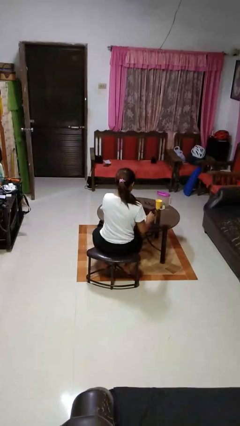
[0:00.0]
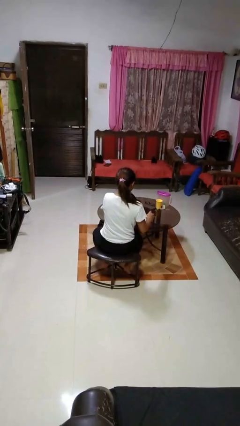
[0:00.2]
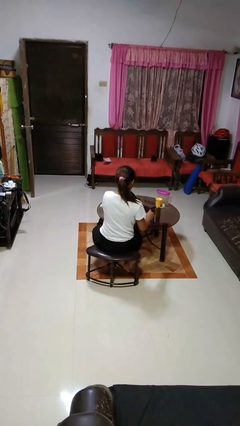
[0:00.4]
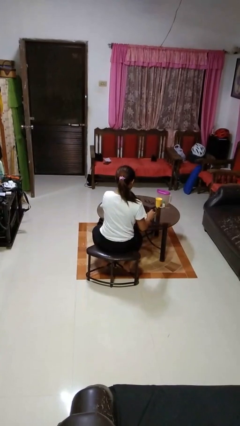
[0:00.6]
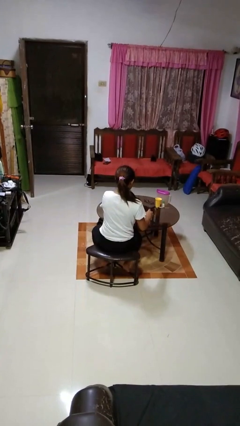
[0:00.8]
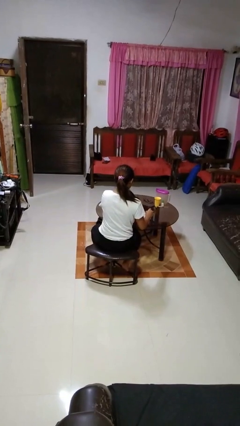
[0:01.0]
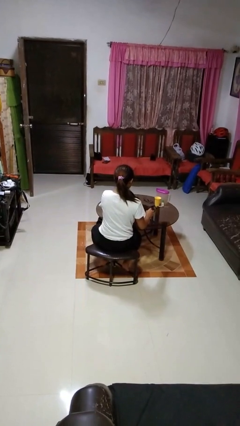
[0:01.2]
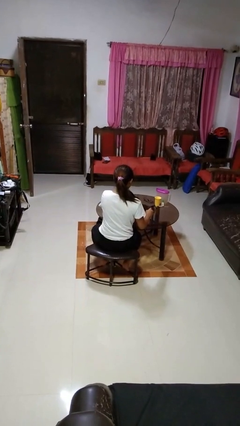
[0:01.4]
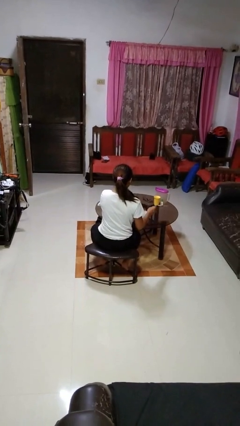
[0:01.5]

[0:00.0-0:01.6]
person stirs mug

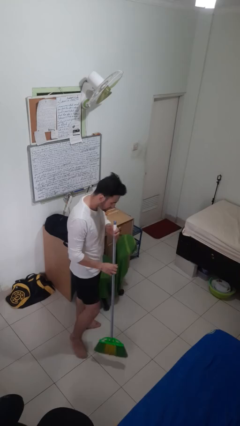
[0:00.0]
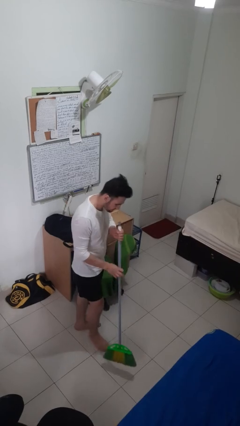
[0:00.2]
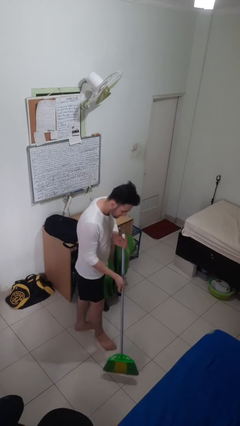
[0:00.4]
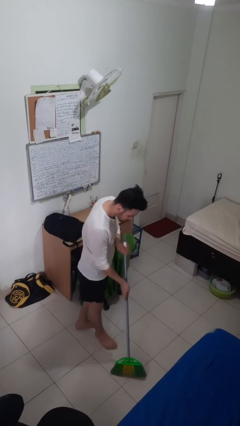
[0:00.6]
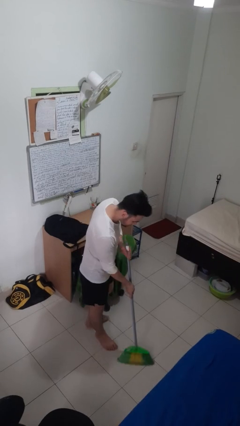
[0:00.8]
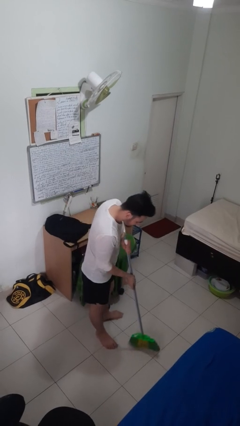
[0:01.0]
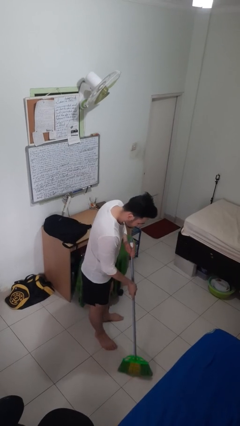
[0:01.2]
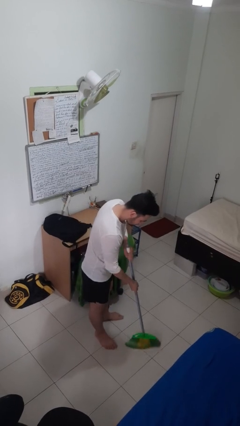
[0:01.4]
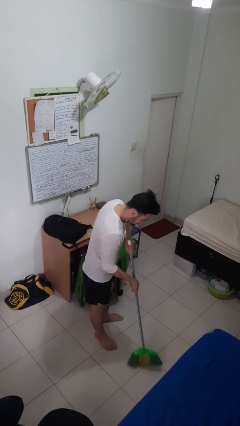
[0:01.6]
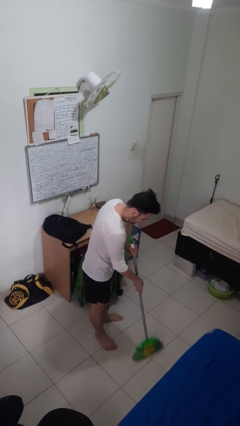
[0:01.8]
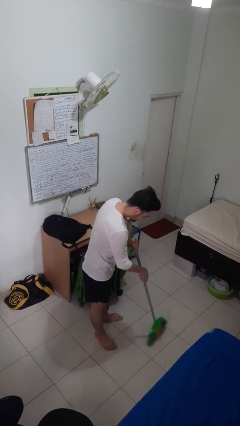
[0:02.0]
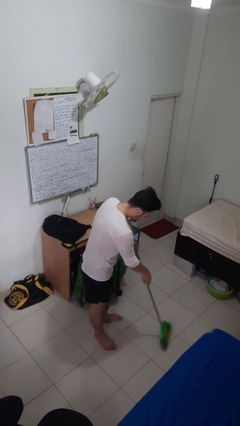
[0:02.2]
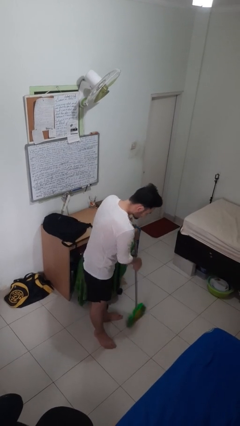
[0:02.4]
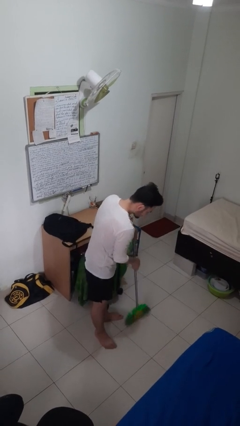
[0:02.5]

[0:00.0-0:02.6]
person sweeps floor

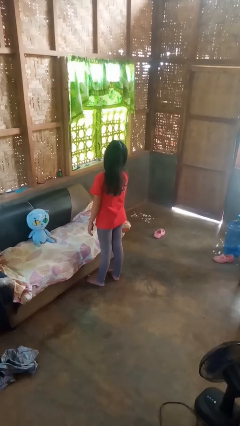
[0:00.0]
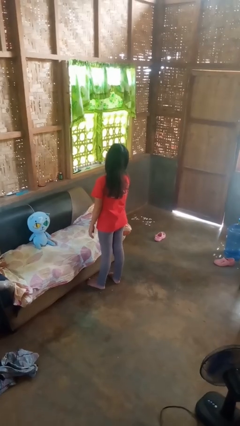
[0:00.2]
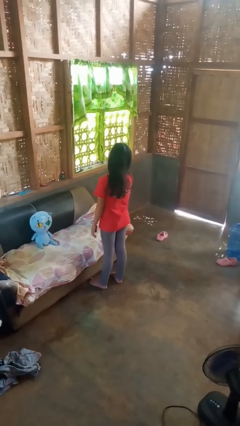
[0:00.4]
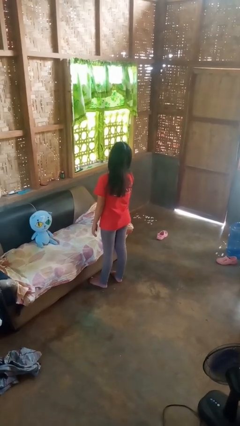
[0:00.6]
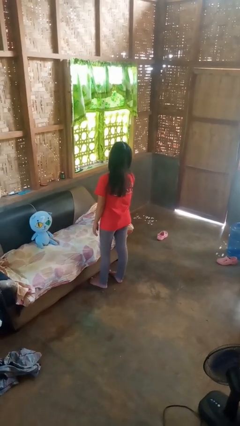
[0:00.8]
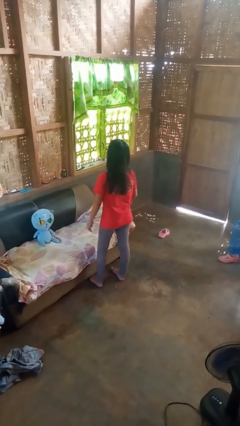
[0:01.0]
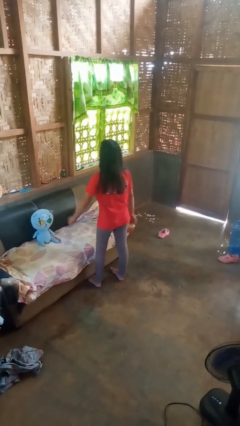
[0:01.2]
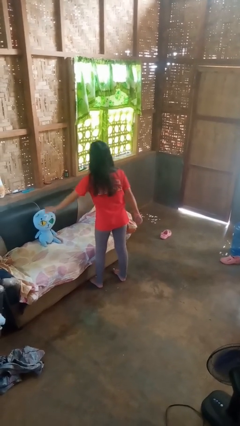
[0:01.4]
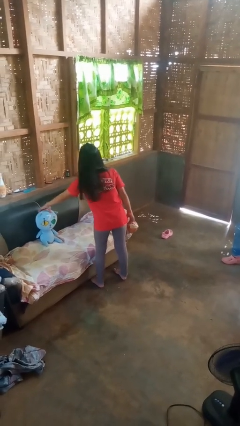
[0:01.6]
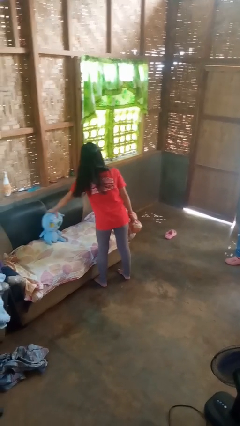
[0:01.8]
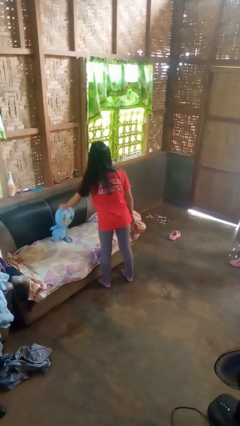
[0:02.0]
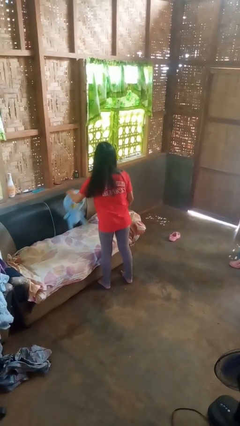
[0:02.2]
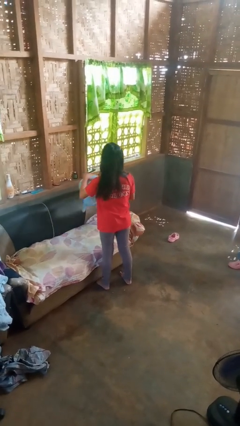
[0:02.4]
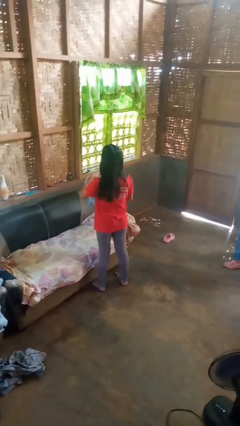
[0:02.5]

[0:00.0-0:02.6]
person picks up object from couch

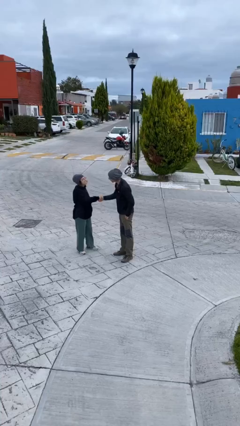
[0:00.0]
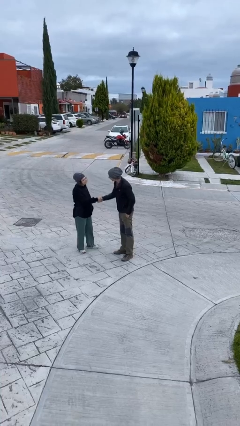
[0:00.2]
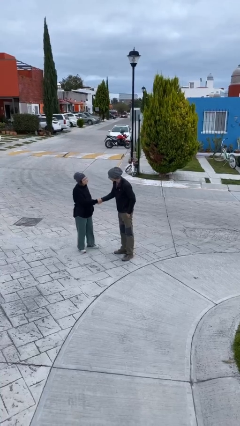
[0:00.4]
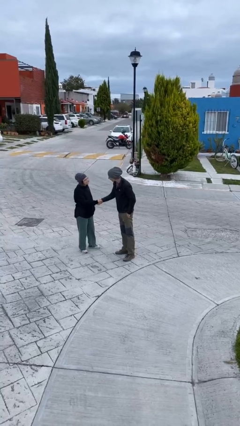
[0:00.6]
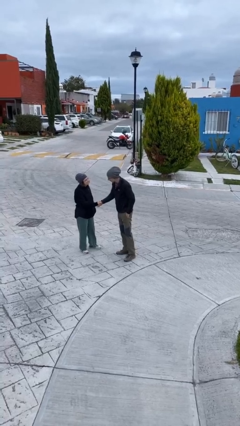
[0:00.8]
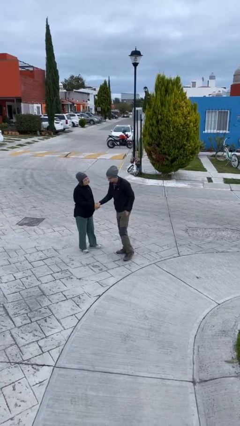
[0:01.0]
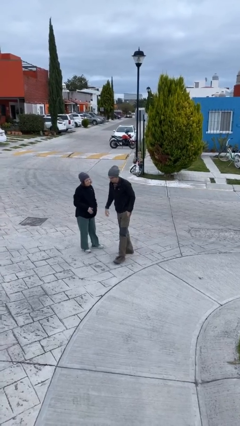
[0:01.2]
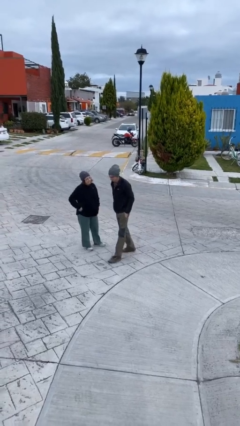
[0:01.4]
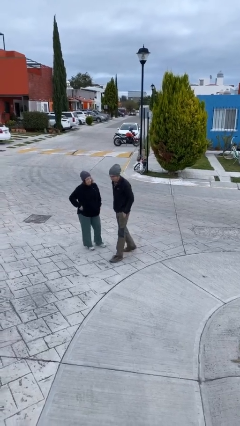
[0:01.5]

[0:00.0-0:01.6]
person shakes hand

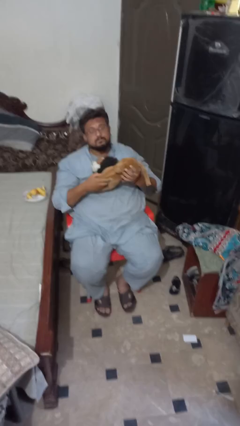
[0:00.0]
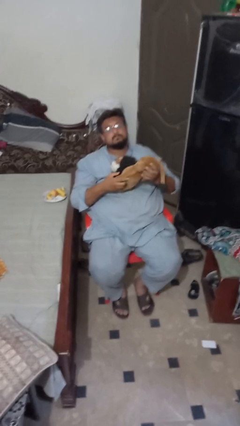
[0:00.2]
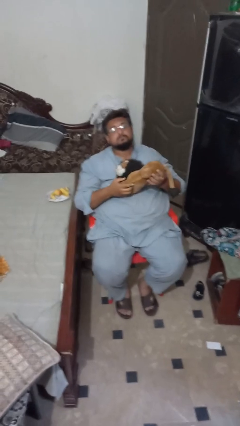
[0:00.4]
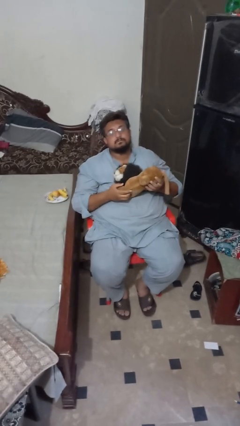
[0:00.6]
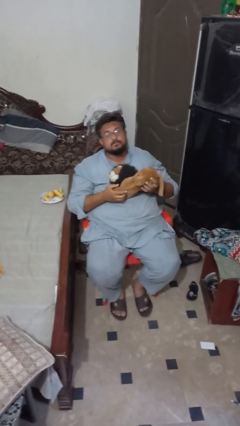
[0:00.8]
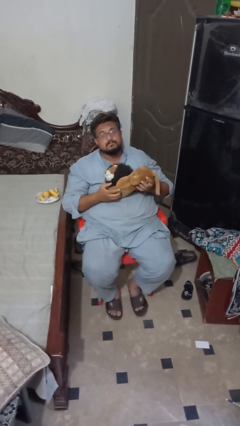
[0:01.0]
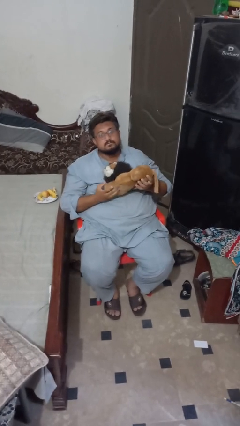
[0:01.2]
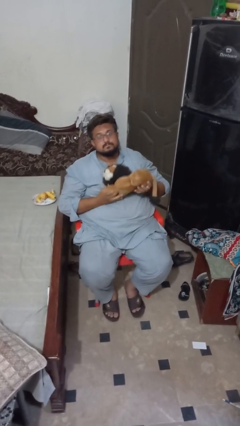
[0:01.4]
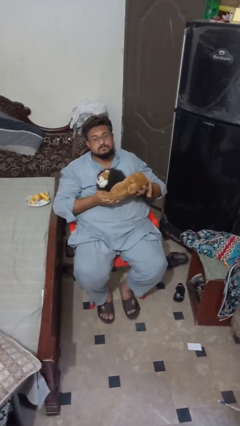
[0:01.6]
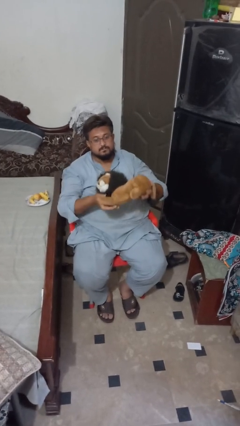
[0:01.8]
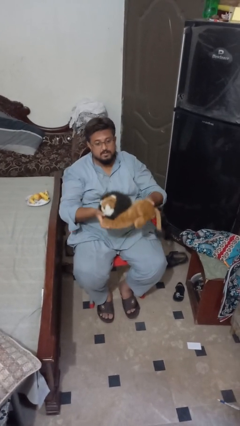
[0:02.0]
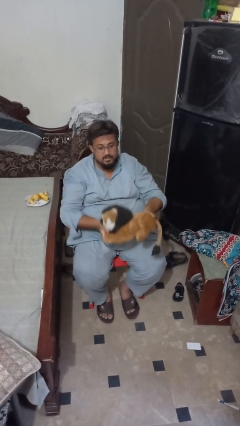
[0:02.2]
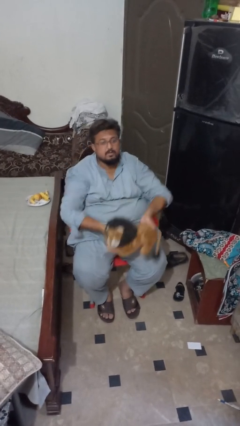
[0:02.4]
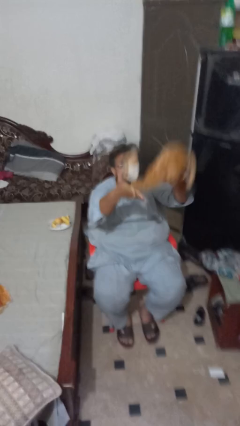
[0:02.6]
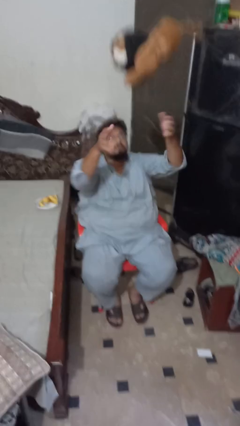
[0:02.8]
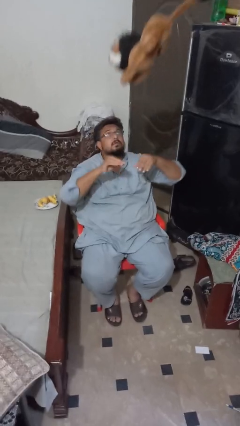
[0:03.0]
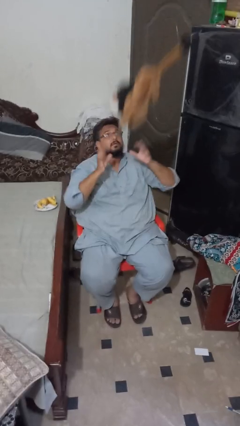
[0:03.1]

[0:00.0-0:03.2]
person drops object

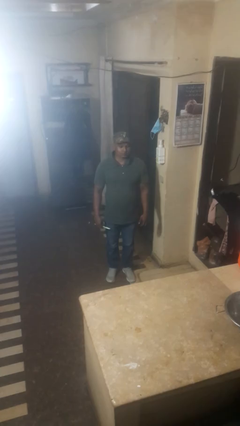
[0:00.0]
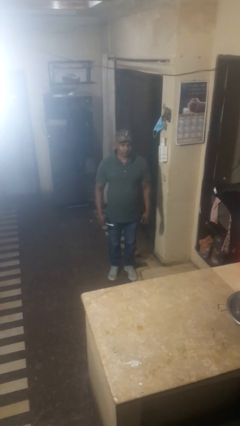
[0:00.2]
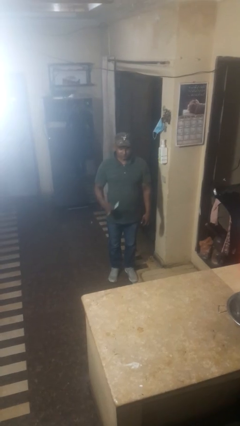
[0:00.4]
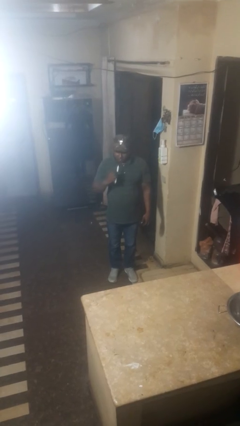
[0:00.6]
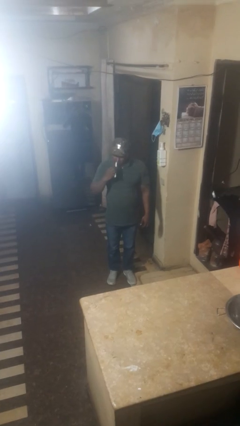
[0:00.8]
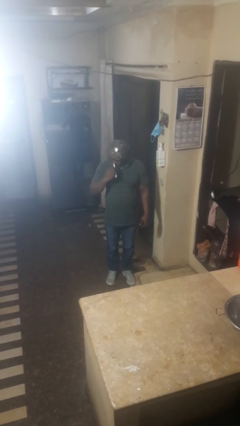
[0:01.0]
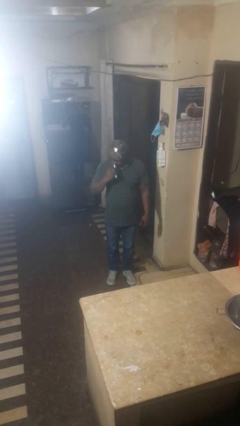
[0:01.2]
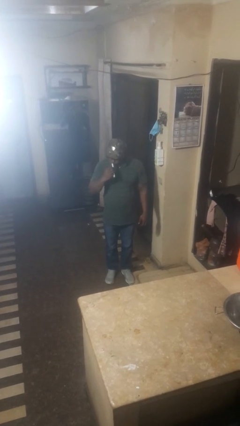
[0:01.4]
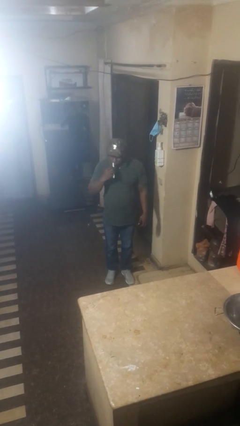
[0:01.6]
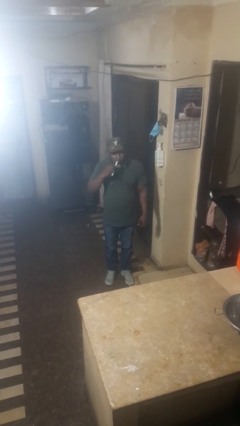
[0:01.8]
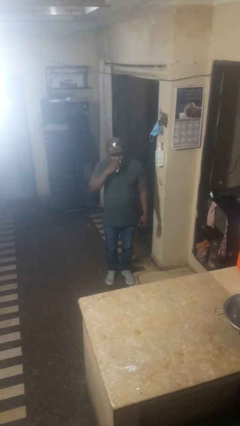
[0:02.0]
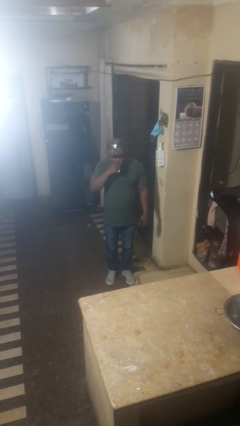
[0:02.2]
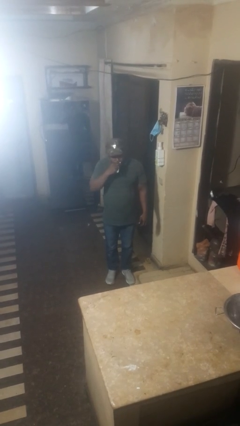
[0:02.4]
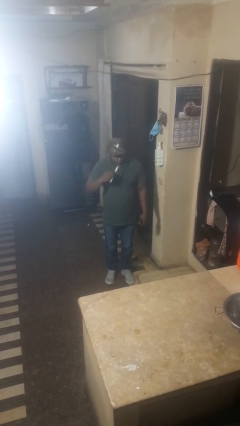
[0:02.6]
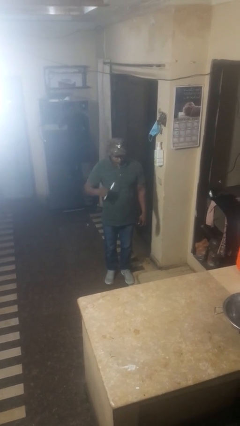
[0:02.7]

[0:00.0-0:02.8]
person brushes teeth

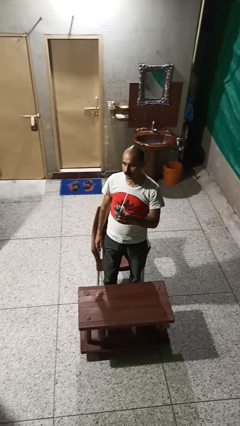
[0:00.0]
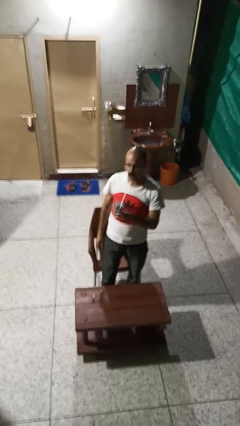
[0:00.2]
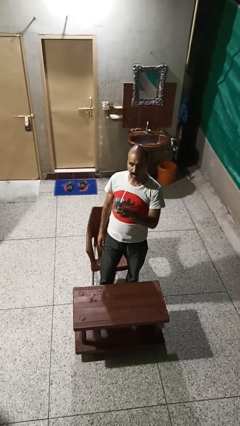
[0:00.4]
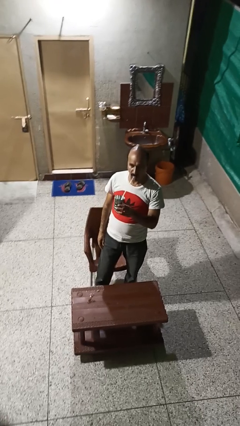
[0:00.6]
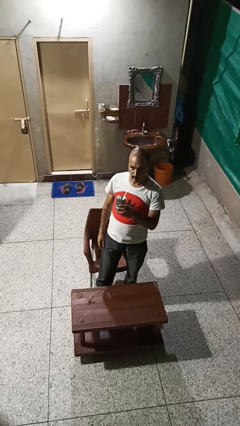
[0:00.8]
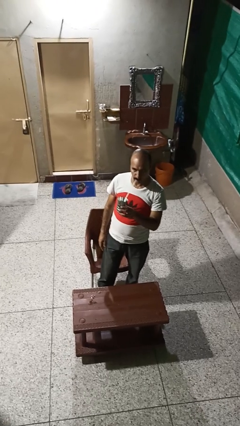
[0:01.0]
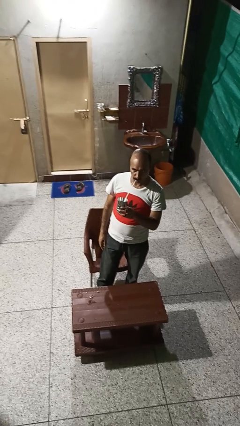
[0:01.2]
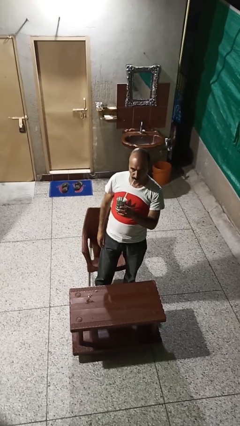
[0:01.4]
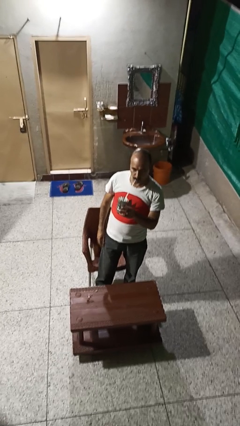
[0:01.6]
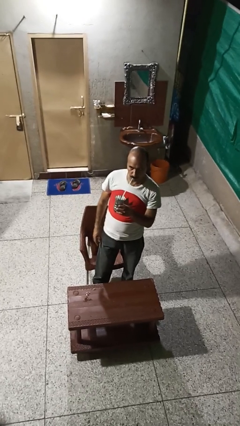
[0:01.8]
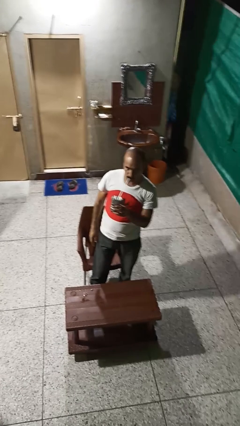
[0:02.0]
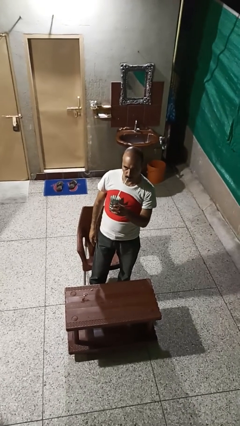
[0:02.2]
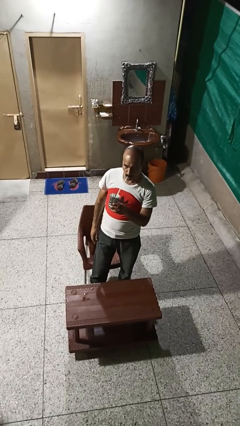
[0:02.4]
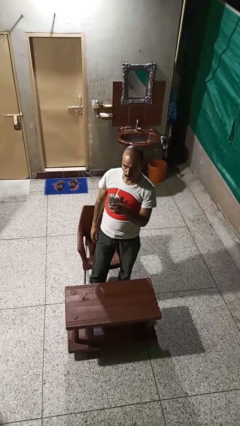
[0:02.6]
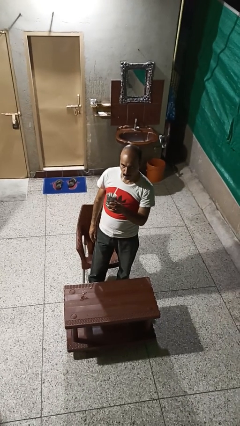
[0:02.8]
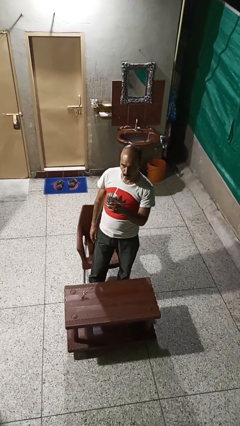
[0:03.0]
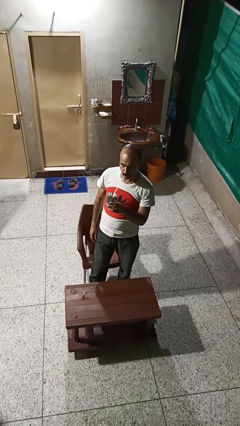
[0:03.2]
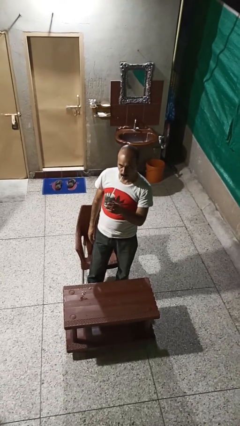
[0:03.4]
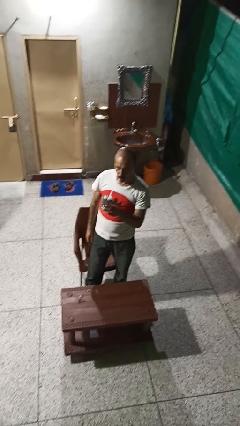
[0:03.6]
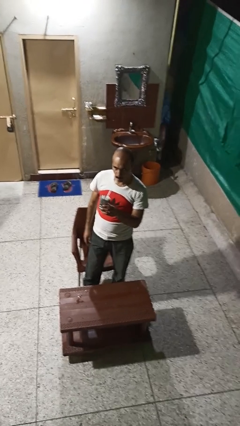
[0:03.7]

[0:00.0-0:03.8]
person drinks from straw
